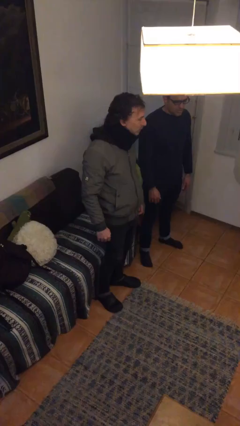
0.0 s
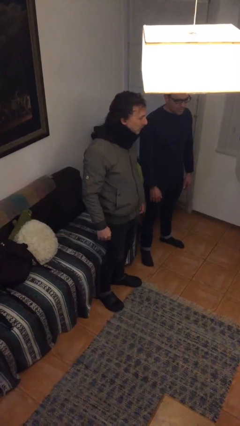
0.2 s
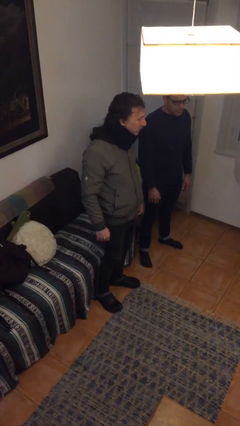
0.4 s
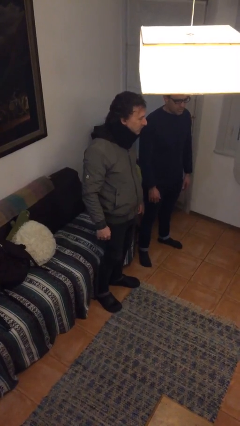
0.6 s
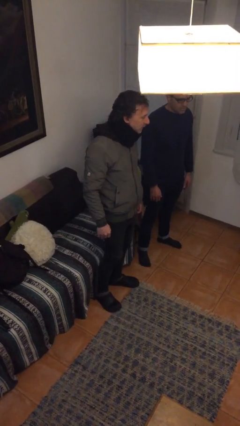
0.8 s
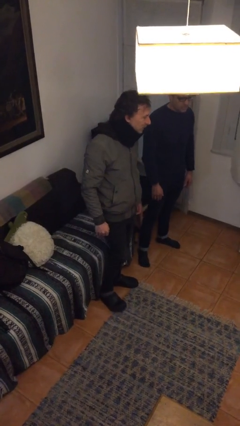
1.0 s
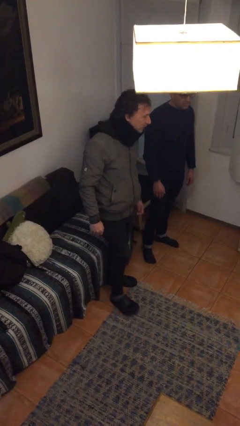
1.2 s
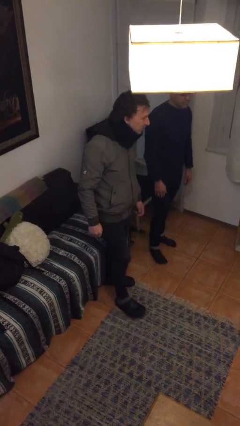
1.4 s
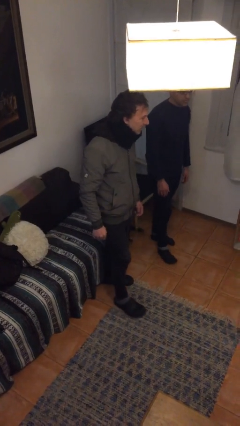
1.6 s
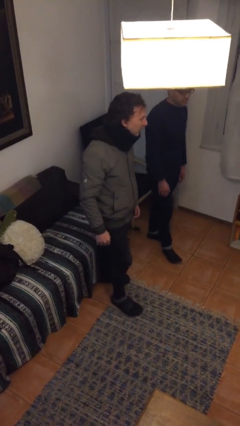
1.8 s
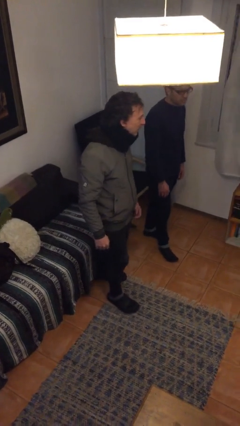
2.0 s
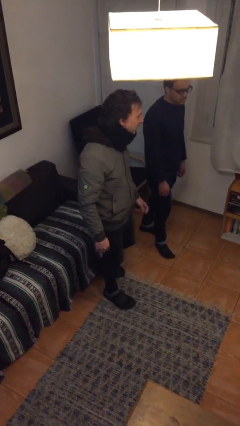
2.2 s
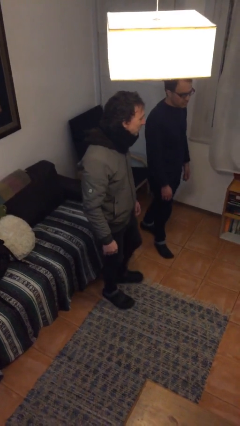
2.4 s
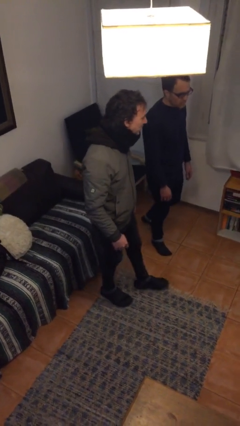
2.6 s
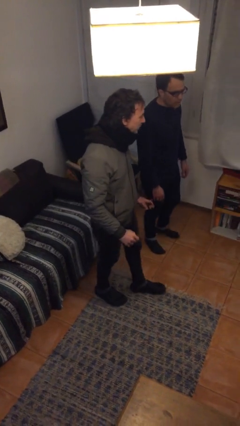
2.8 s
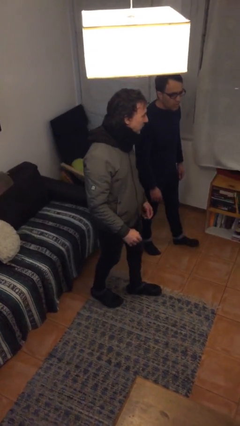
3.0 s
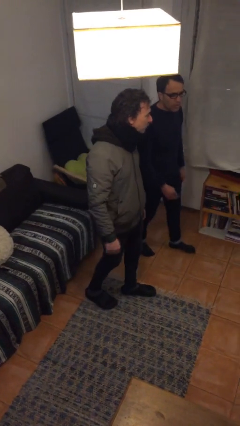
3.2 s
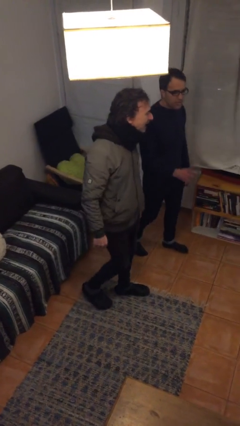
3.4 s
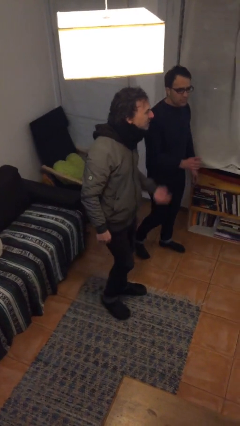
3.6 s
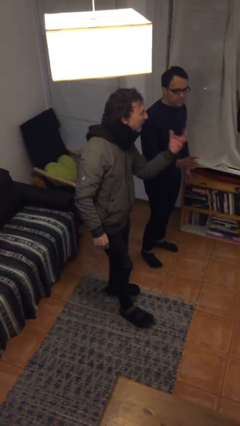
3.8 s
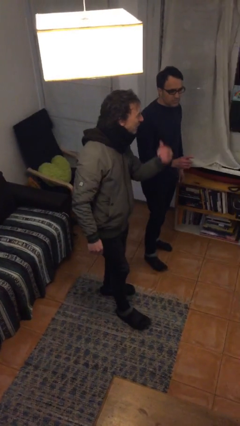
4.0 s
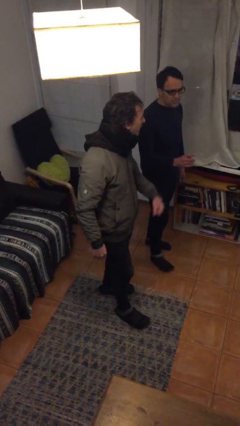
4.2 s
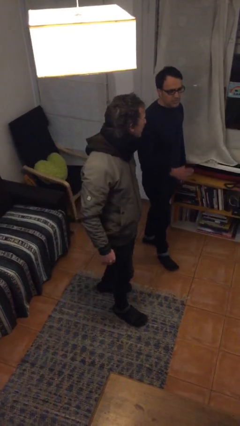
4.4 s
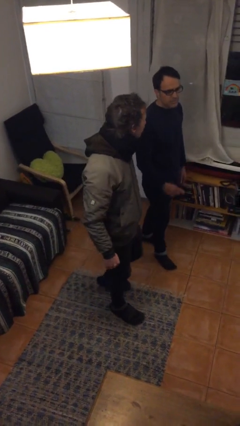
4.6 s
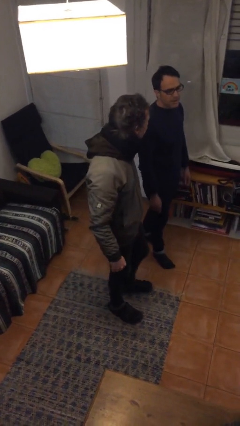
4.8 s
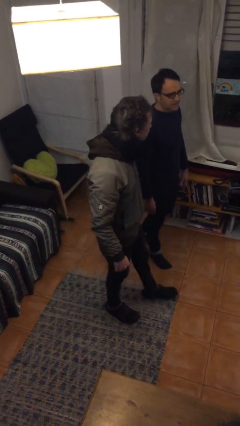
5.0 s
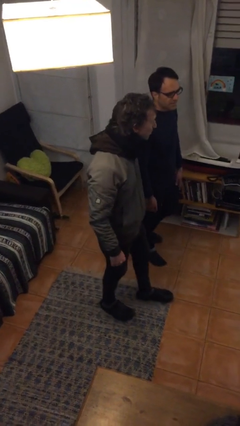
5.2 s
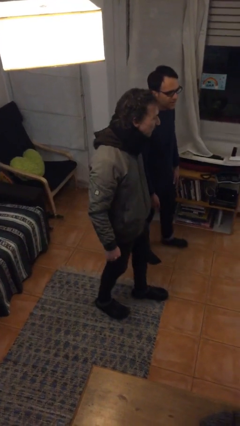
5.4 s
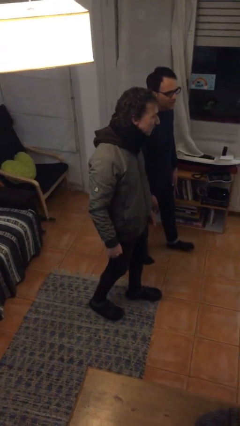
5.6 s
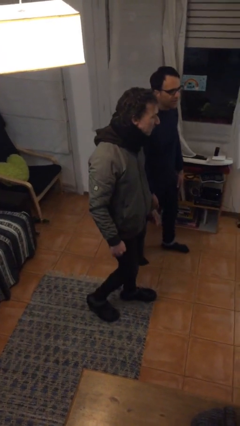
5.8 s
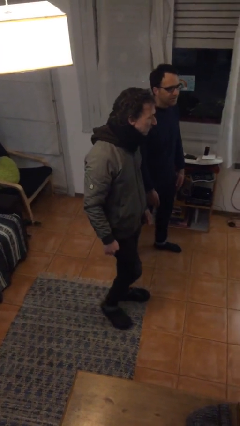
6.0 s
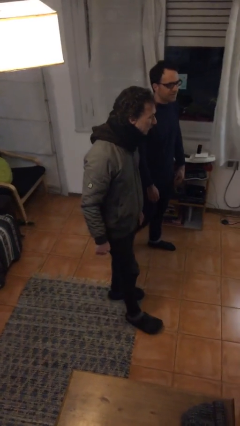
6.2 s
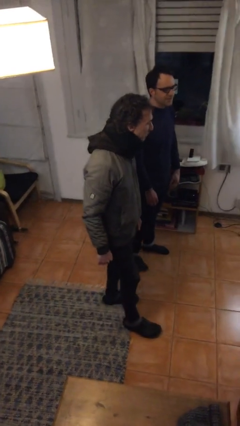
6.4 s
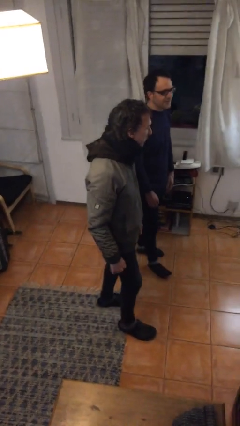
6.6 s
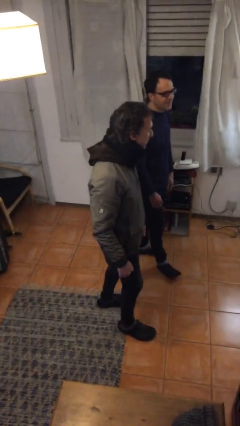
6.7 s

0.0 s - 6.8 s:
person talks to person

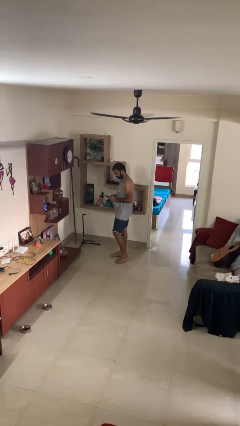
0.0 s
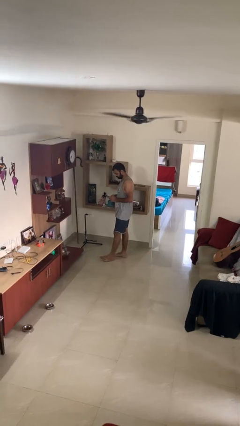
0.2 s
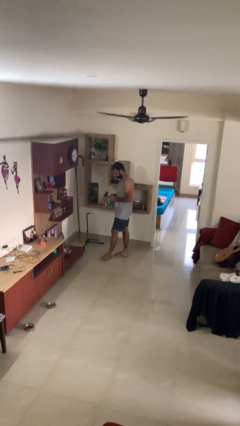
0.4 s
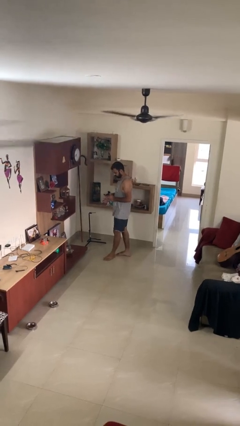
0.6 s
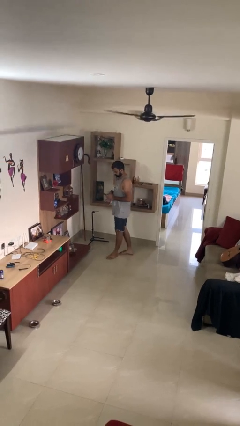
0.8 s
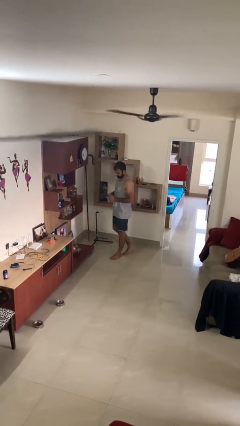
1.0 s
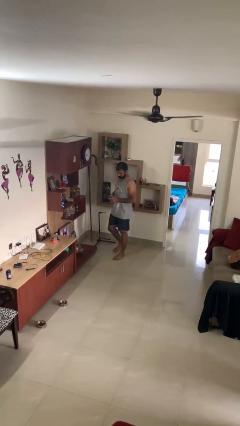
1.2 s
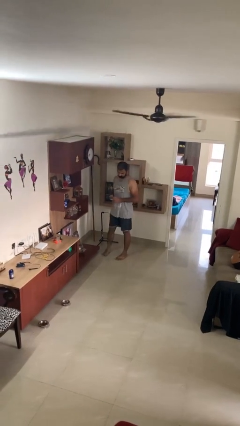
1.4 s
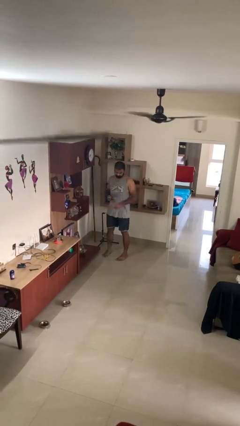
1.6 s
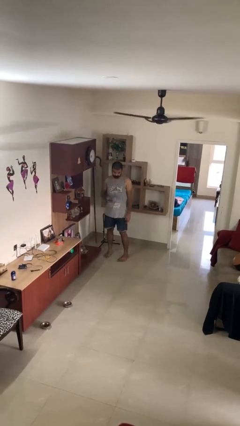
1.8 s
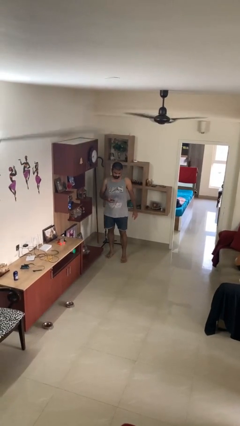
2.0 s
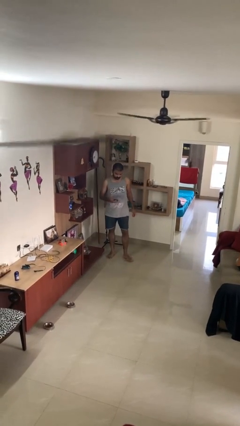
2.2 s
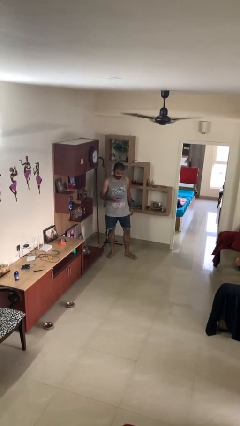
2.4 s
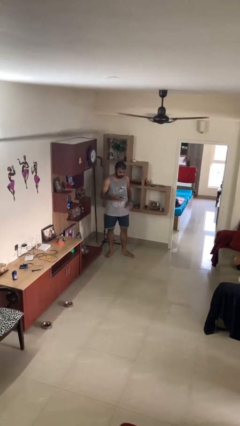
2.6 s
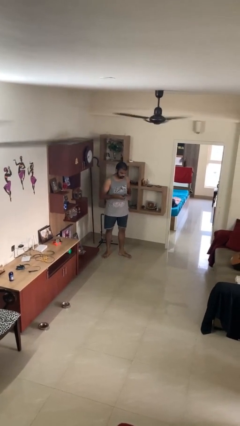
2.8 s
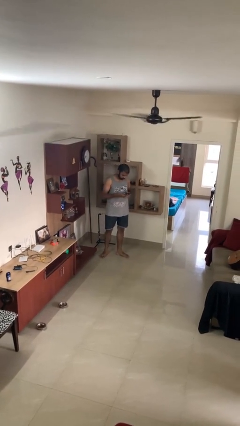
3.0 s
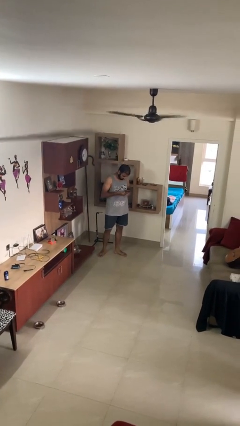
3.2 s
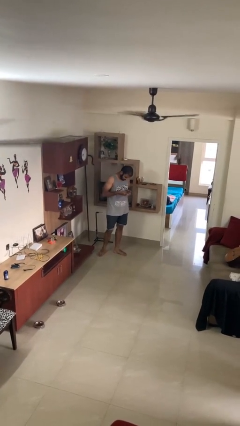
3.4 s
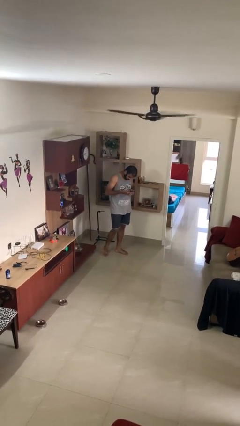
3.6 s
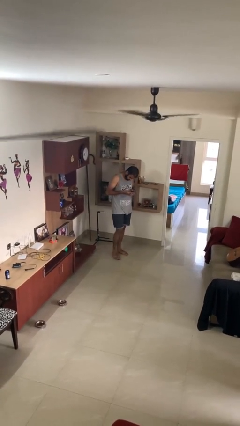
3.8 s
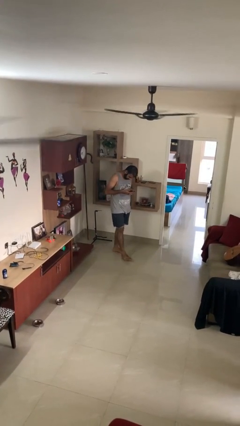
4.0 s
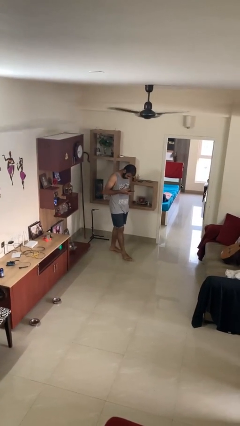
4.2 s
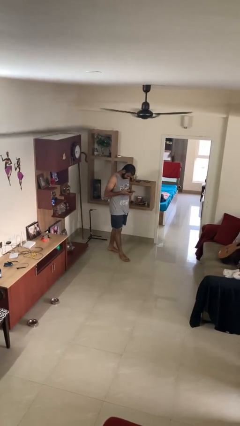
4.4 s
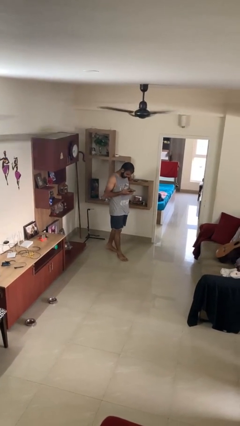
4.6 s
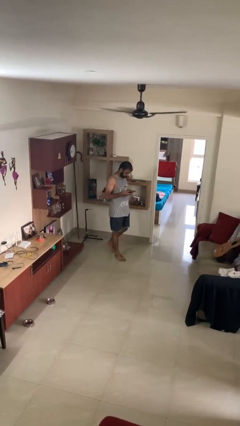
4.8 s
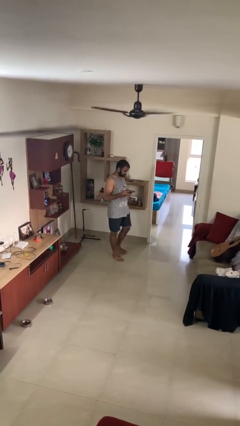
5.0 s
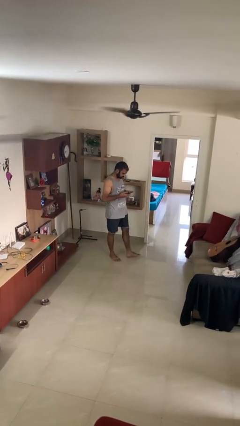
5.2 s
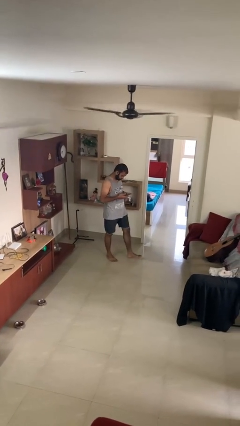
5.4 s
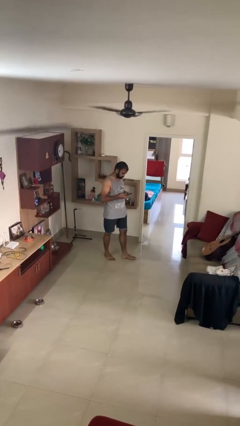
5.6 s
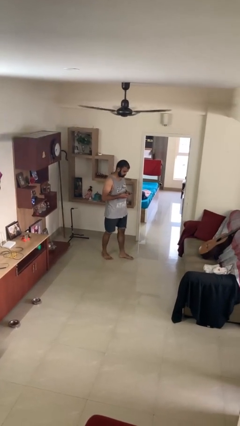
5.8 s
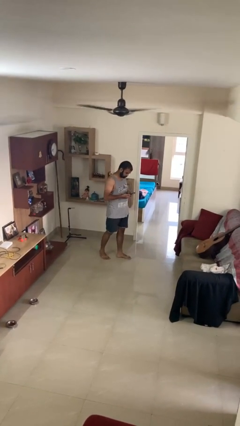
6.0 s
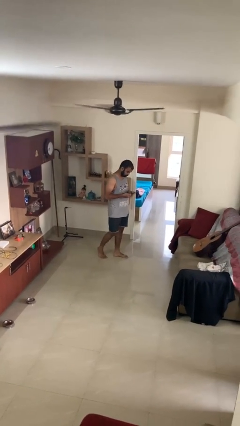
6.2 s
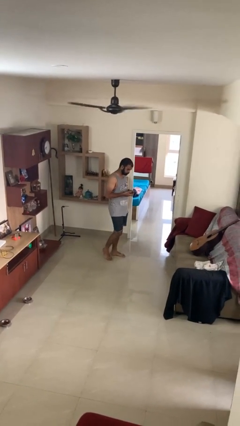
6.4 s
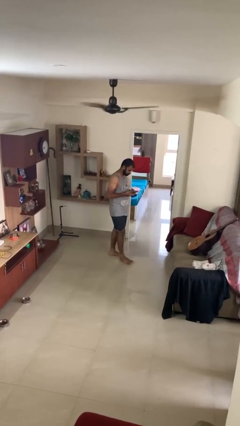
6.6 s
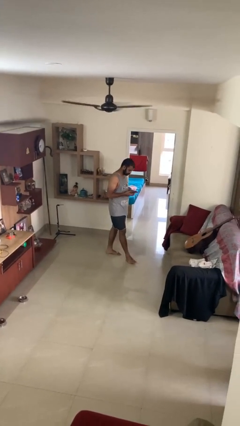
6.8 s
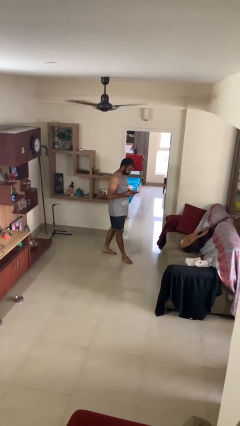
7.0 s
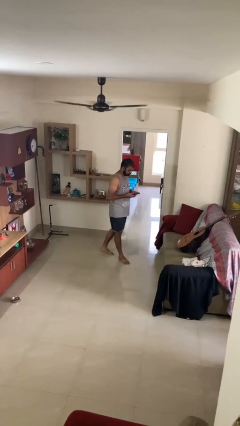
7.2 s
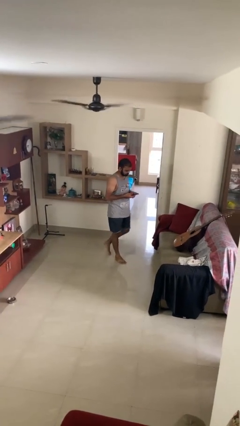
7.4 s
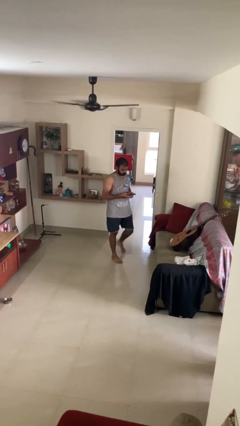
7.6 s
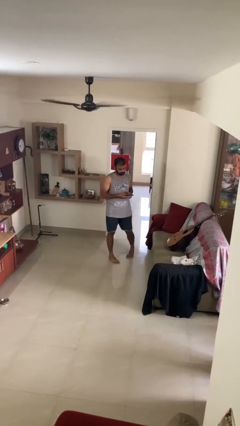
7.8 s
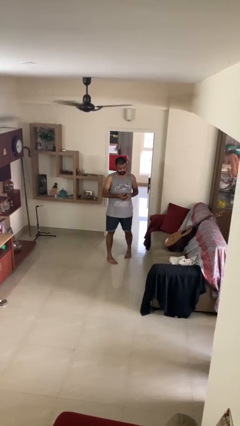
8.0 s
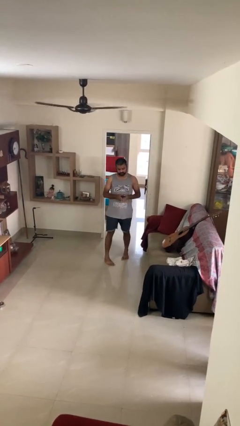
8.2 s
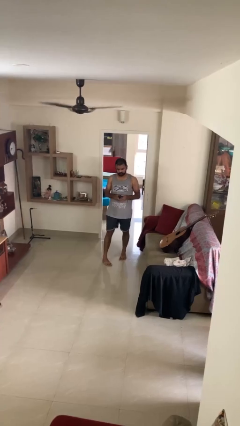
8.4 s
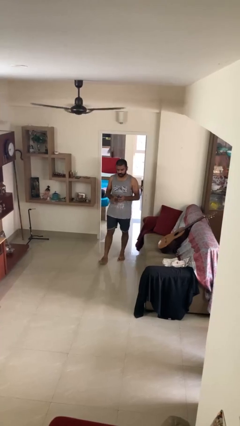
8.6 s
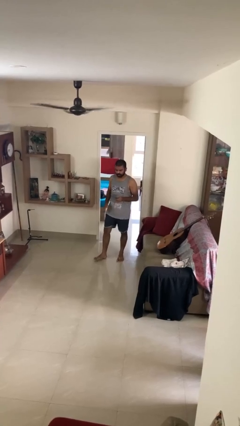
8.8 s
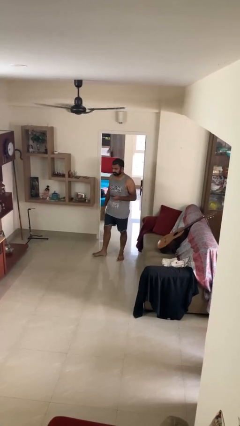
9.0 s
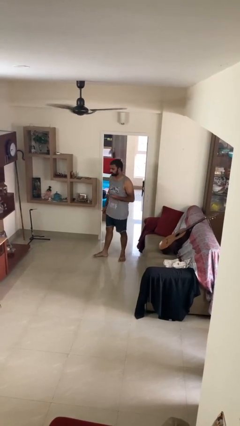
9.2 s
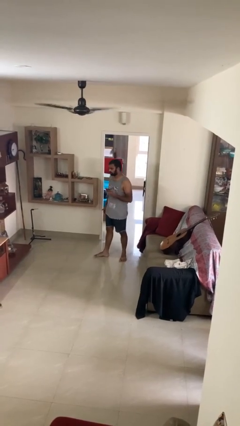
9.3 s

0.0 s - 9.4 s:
person texts on phone

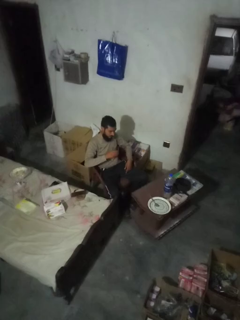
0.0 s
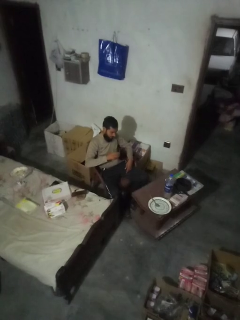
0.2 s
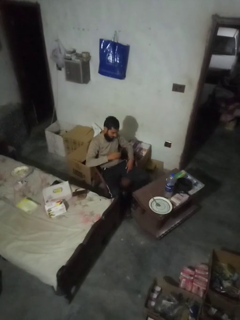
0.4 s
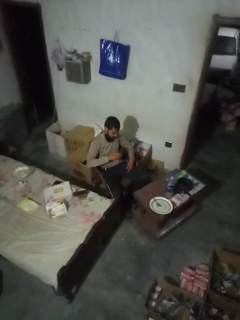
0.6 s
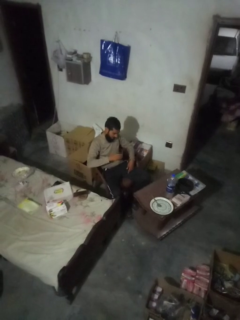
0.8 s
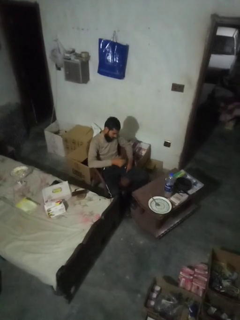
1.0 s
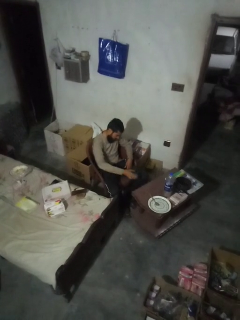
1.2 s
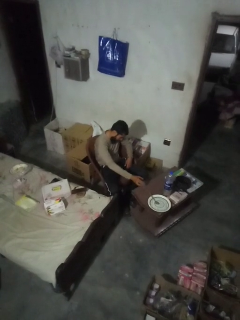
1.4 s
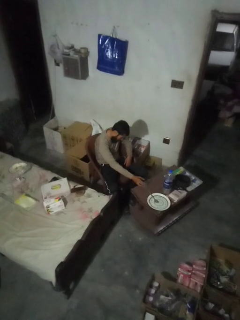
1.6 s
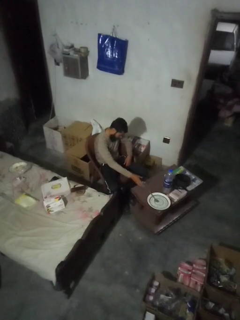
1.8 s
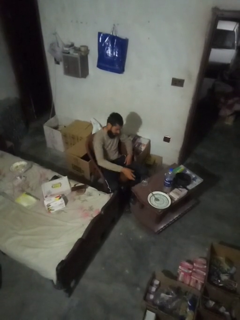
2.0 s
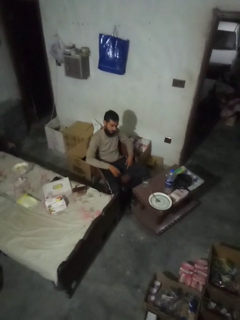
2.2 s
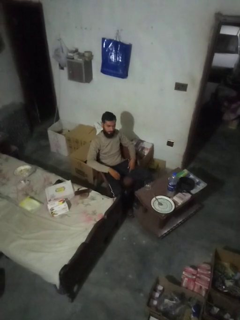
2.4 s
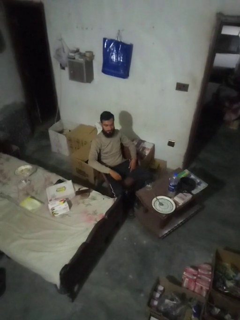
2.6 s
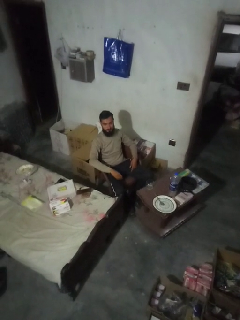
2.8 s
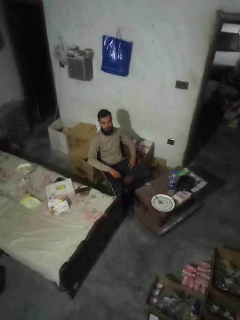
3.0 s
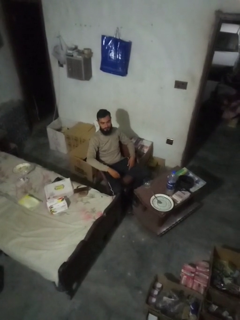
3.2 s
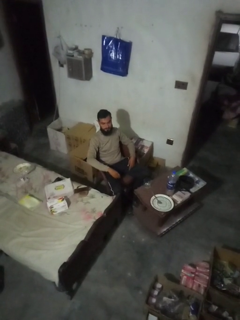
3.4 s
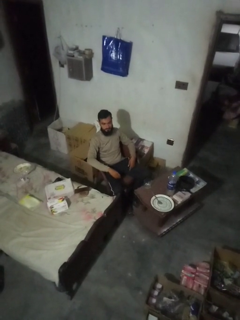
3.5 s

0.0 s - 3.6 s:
person puts down object on table
